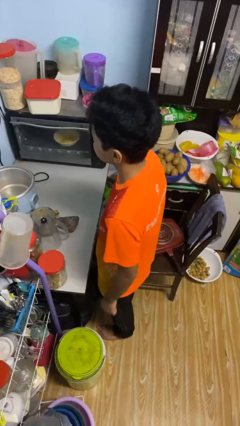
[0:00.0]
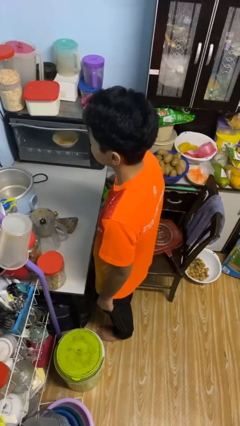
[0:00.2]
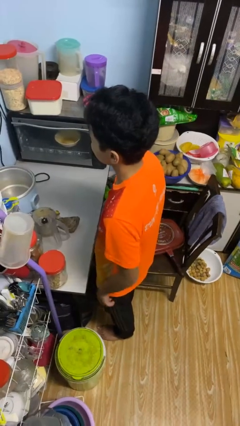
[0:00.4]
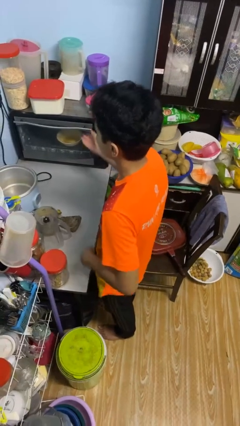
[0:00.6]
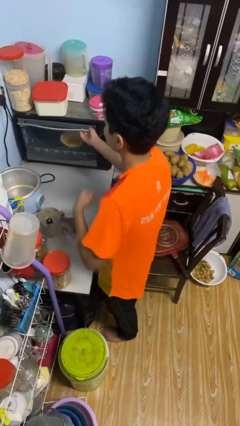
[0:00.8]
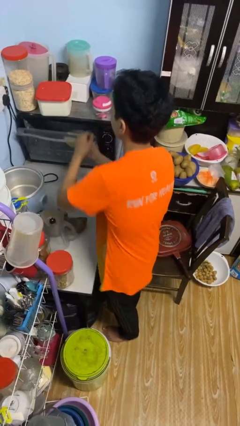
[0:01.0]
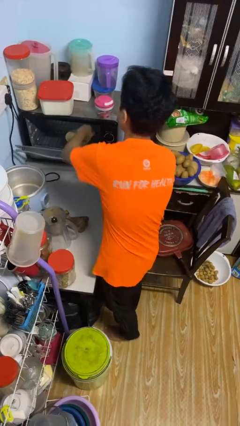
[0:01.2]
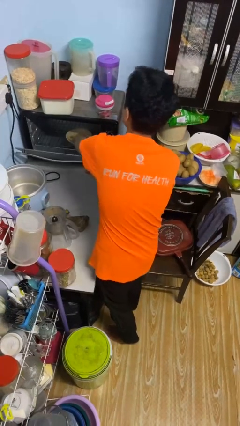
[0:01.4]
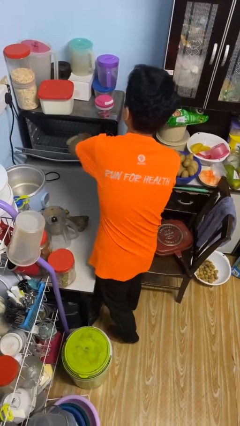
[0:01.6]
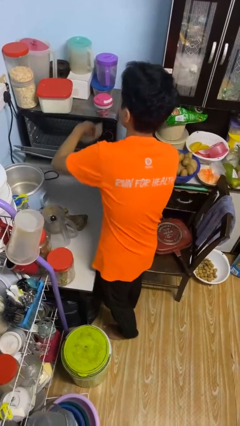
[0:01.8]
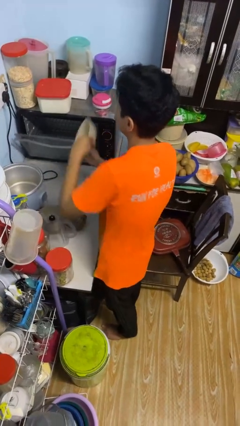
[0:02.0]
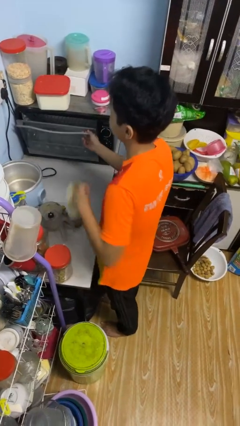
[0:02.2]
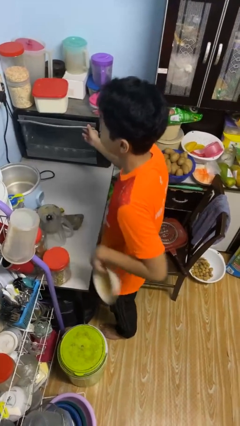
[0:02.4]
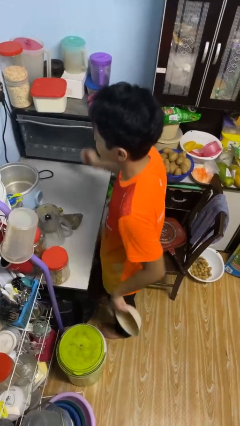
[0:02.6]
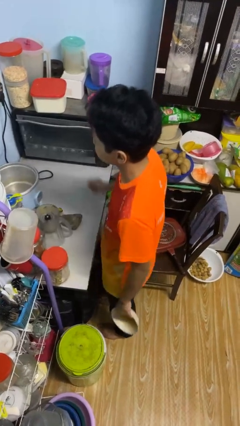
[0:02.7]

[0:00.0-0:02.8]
person takes object from oven

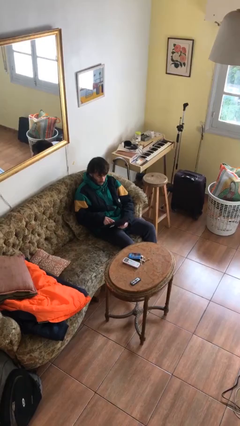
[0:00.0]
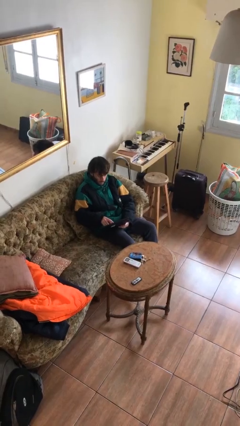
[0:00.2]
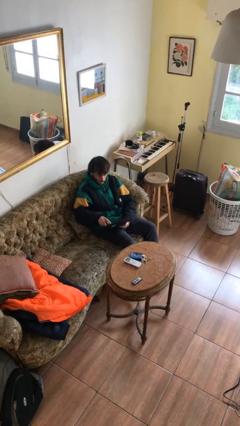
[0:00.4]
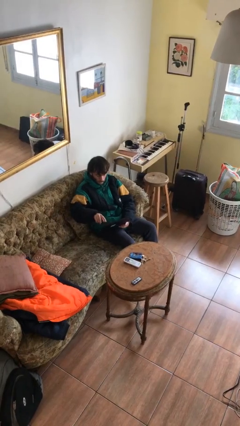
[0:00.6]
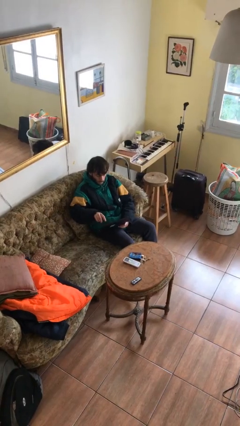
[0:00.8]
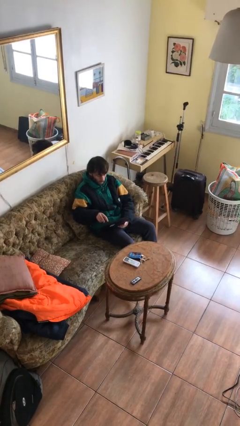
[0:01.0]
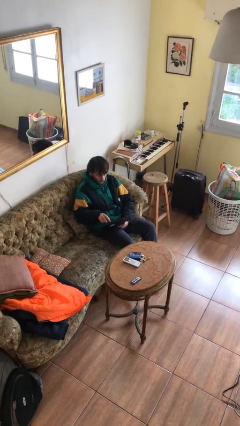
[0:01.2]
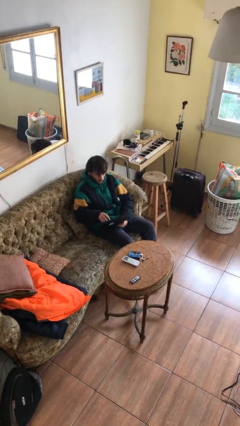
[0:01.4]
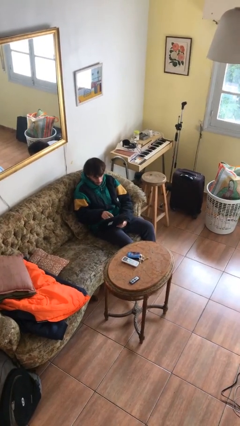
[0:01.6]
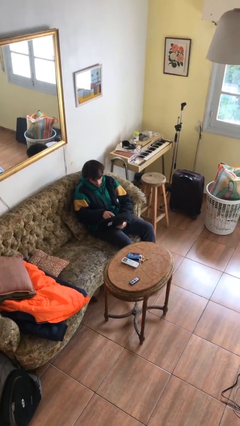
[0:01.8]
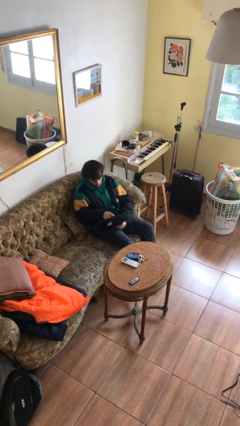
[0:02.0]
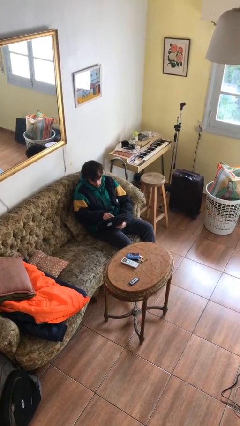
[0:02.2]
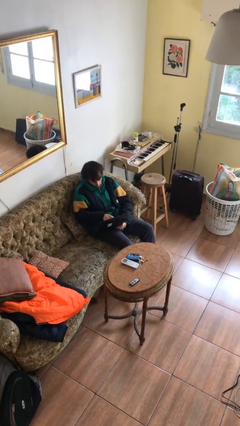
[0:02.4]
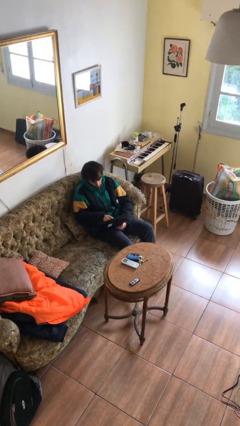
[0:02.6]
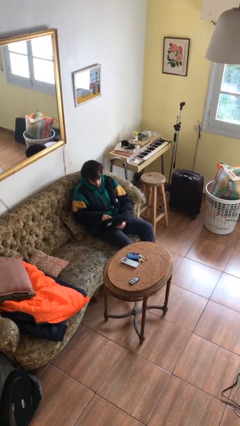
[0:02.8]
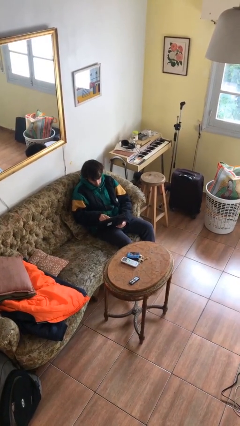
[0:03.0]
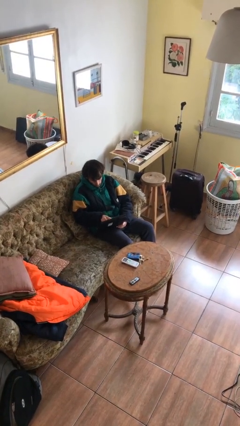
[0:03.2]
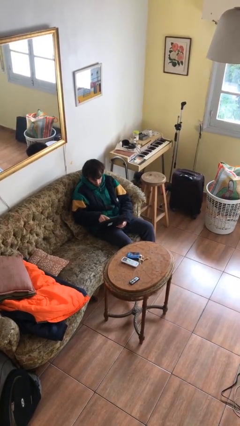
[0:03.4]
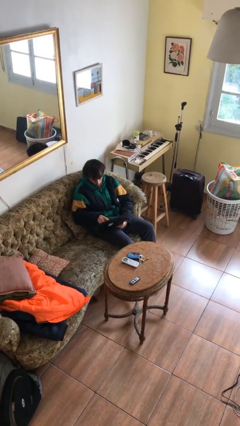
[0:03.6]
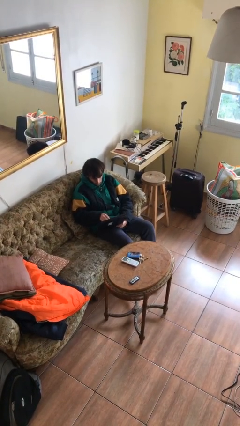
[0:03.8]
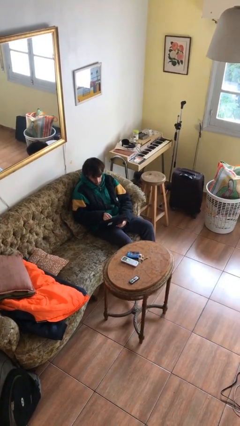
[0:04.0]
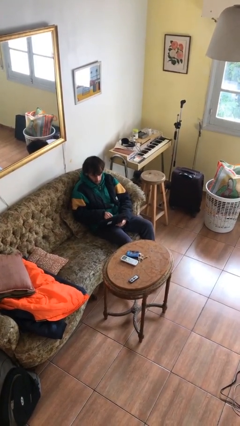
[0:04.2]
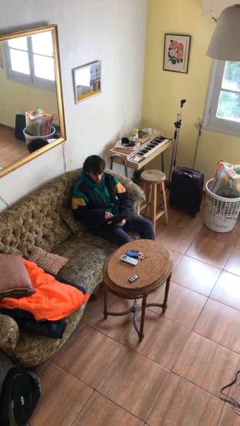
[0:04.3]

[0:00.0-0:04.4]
person interacts with tablet

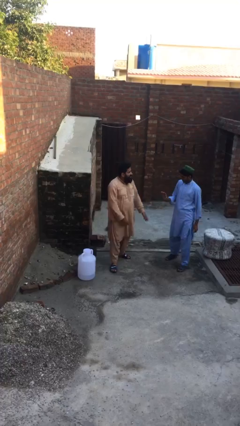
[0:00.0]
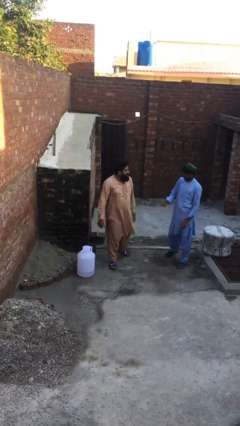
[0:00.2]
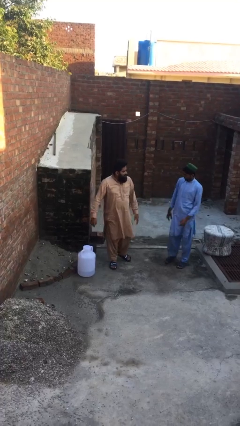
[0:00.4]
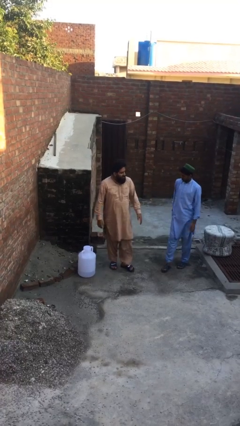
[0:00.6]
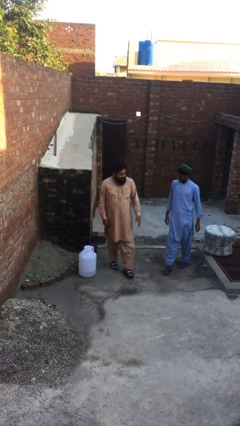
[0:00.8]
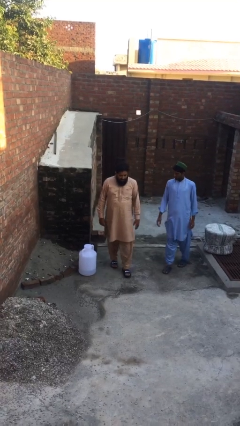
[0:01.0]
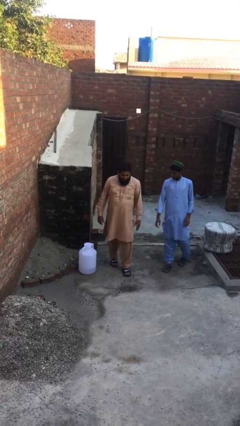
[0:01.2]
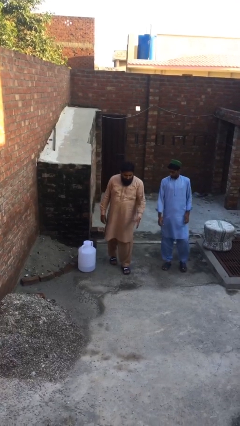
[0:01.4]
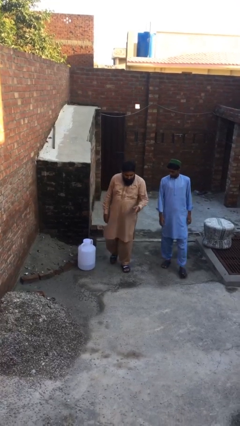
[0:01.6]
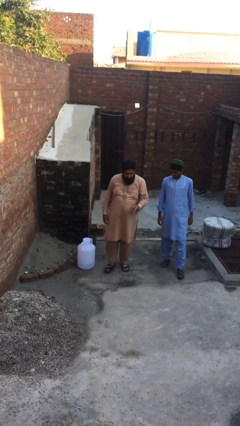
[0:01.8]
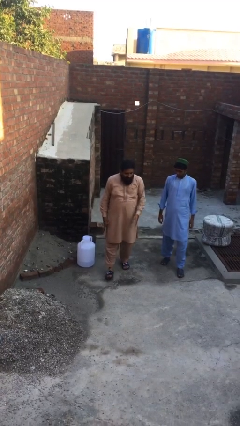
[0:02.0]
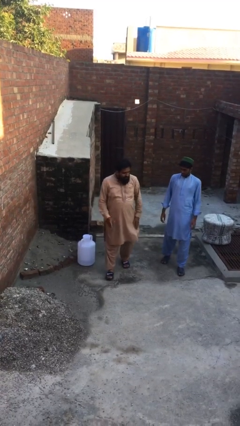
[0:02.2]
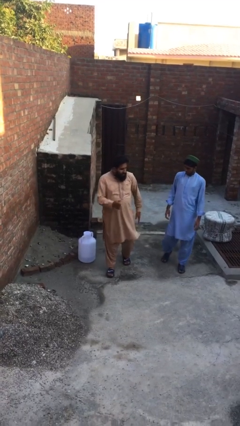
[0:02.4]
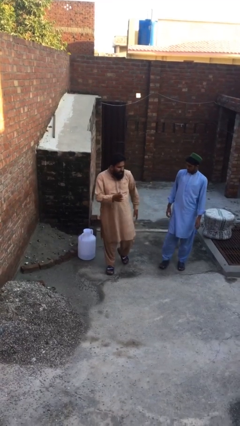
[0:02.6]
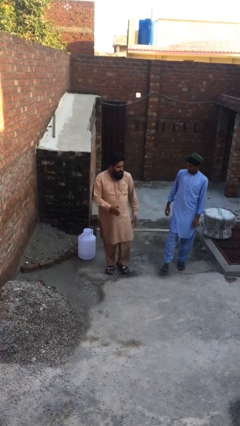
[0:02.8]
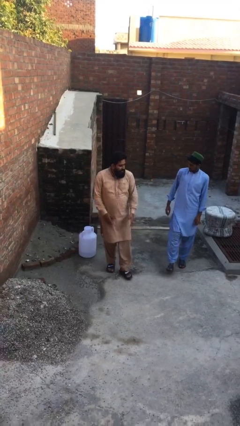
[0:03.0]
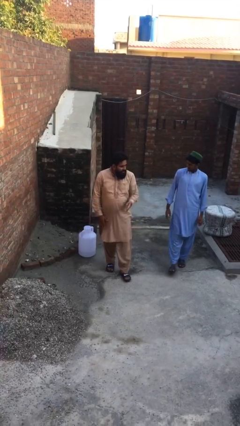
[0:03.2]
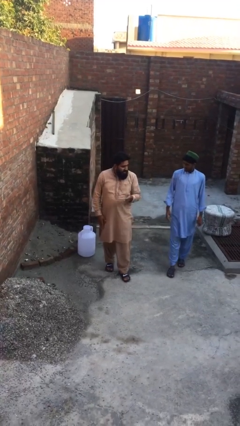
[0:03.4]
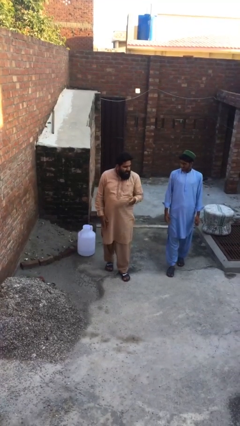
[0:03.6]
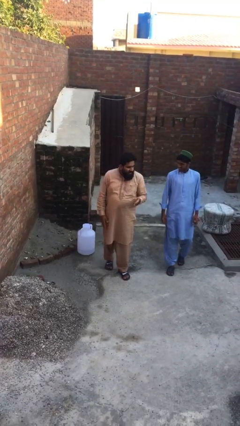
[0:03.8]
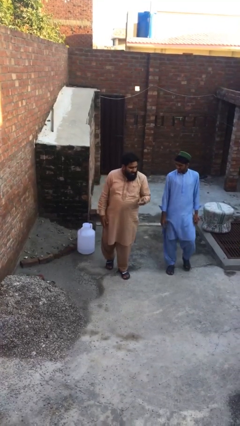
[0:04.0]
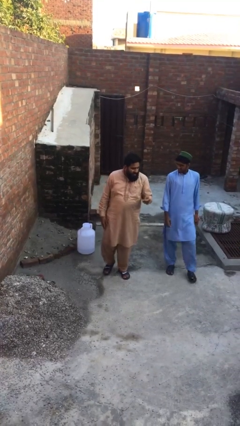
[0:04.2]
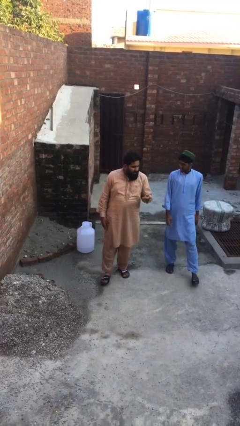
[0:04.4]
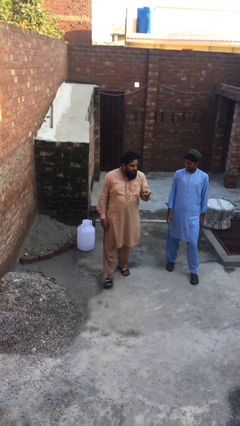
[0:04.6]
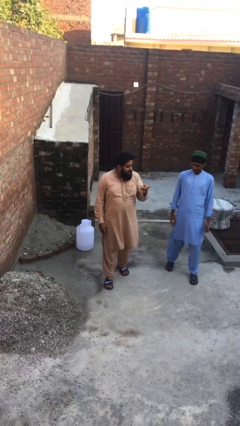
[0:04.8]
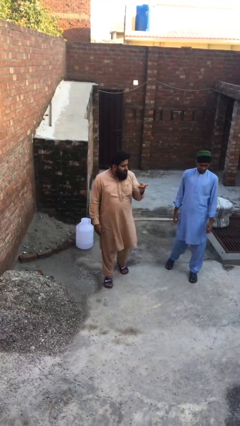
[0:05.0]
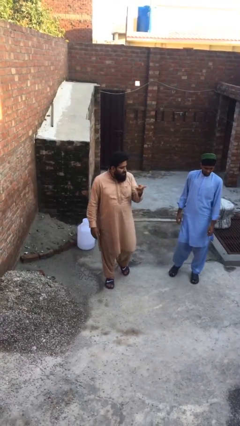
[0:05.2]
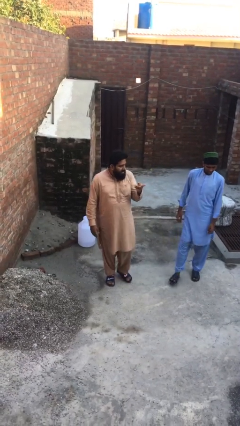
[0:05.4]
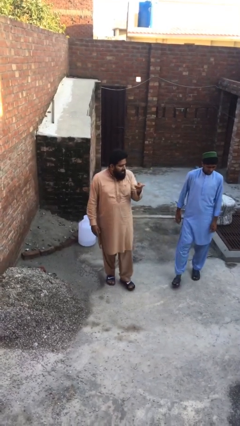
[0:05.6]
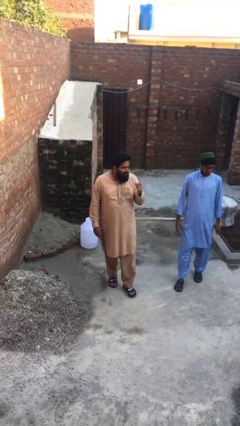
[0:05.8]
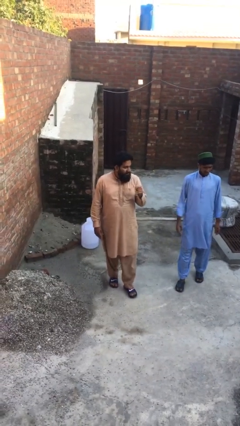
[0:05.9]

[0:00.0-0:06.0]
person talks to person

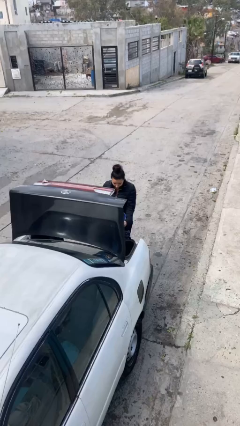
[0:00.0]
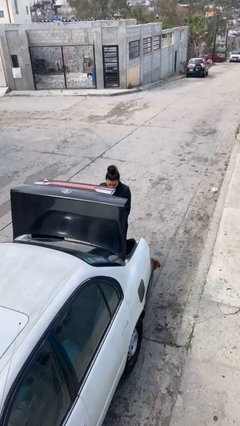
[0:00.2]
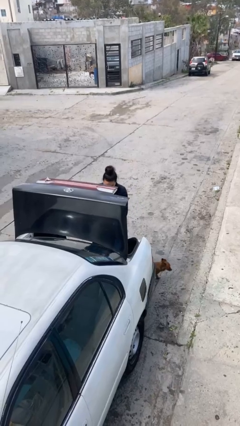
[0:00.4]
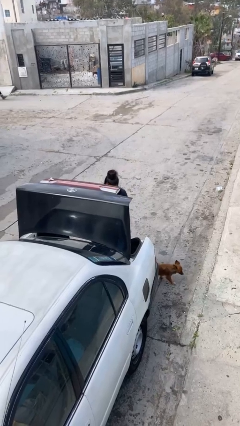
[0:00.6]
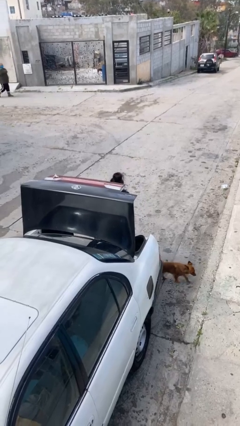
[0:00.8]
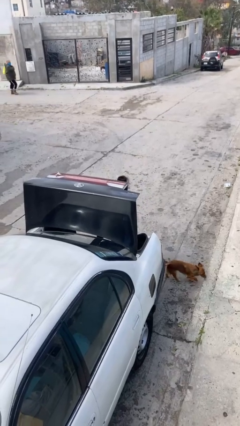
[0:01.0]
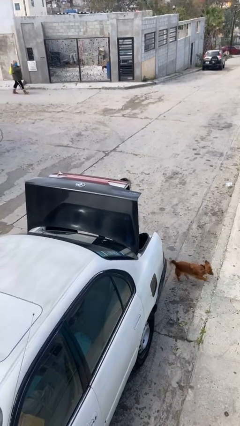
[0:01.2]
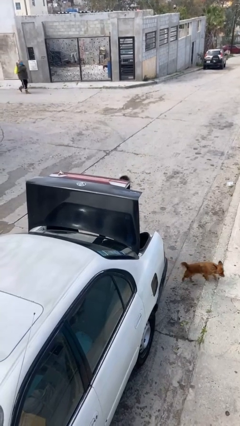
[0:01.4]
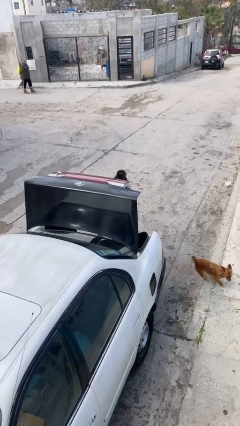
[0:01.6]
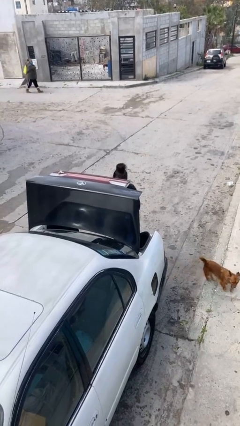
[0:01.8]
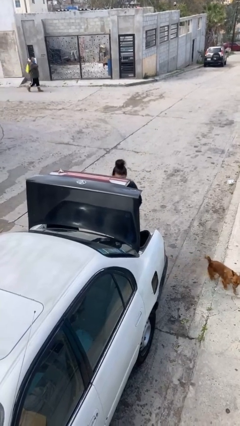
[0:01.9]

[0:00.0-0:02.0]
person loads car

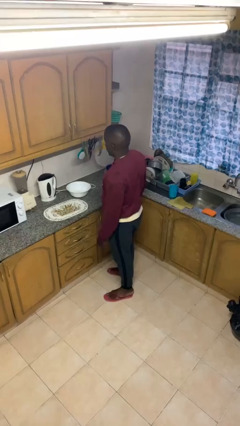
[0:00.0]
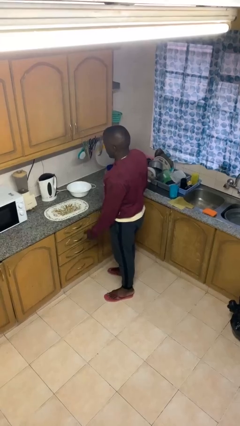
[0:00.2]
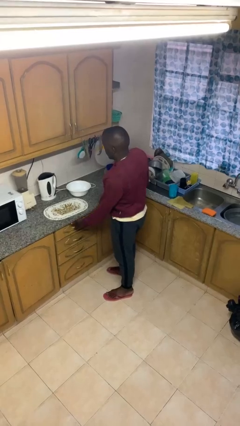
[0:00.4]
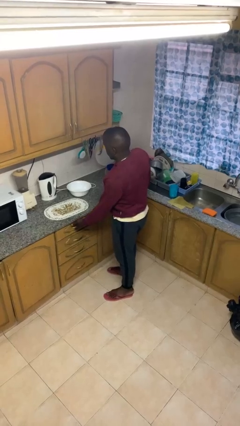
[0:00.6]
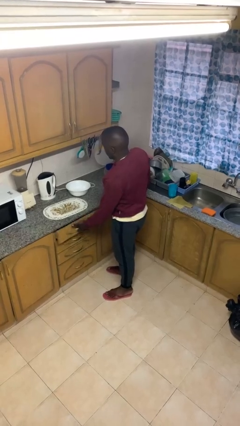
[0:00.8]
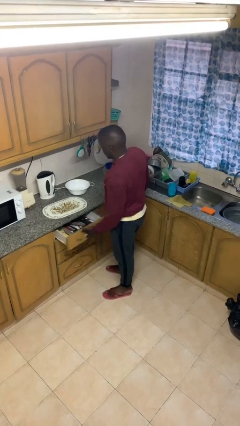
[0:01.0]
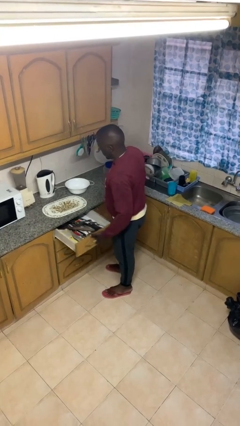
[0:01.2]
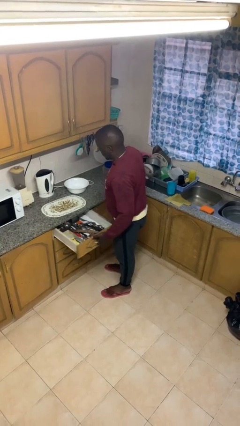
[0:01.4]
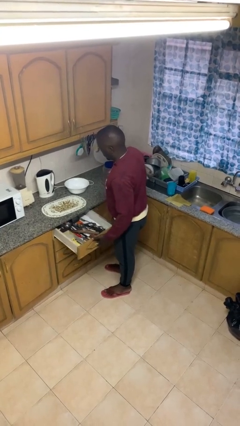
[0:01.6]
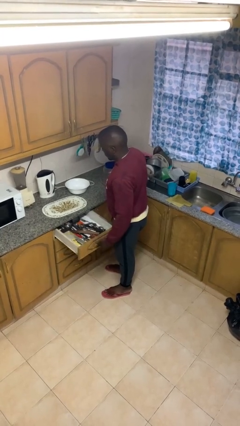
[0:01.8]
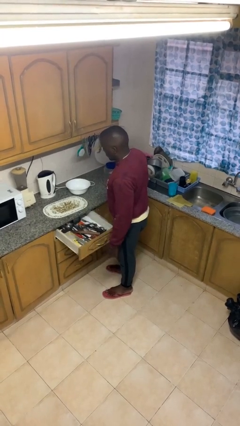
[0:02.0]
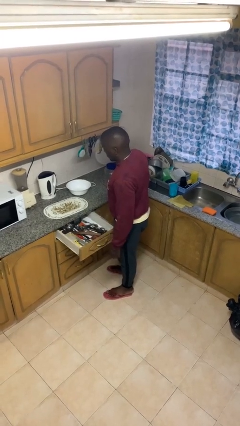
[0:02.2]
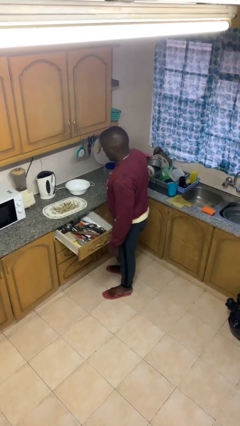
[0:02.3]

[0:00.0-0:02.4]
person opens kitchen drawer
